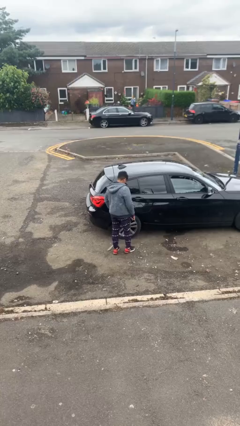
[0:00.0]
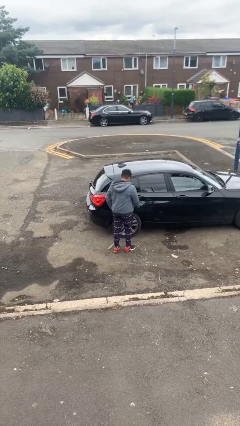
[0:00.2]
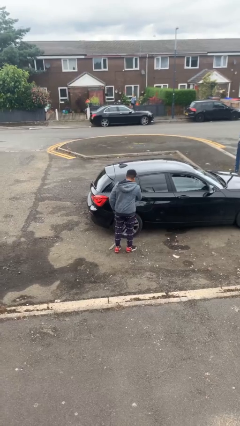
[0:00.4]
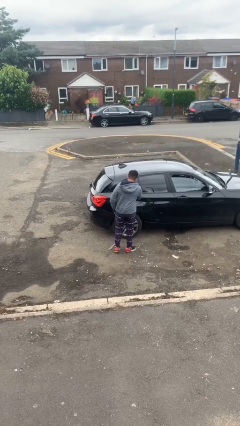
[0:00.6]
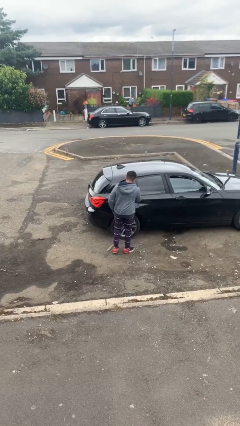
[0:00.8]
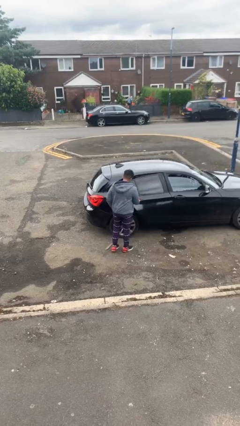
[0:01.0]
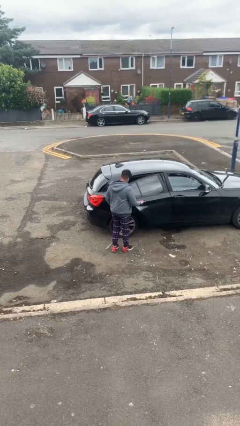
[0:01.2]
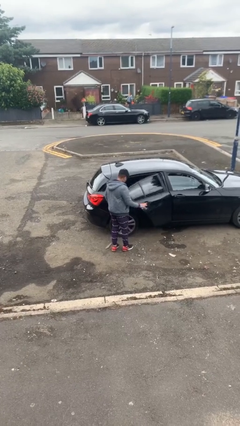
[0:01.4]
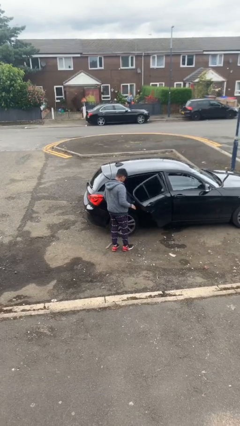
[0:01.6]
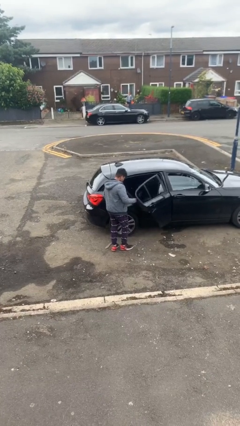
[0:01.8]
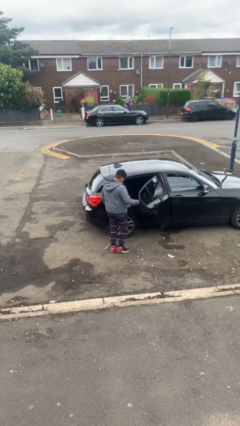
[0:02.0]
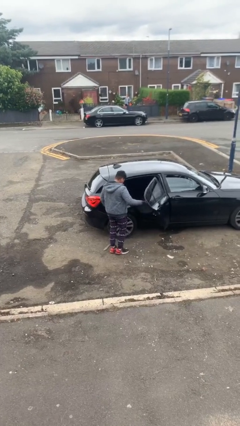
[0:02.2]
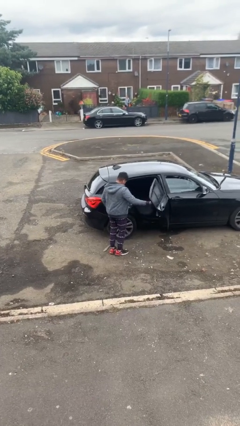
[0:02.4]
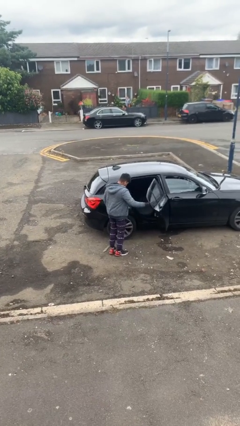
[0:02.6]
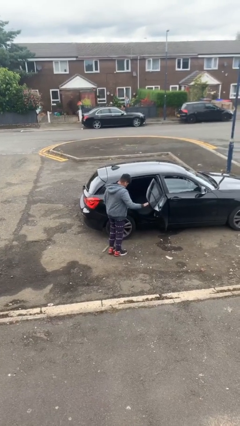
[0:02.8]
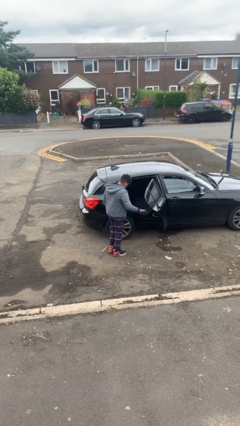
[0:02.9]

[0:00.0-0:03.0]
person opens car door

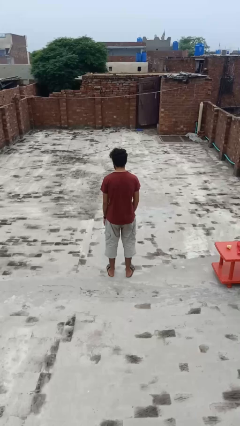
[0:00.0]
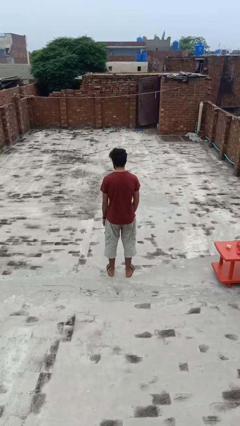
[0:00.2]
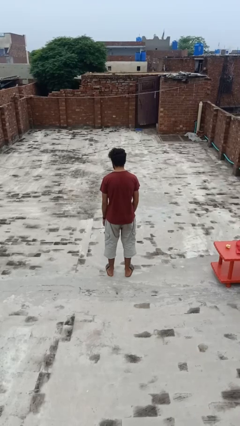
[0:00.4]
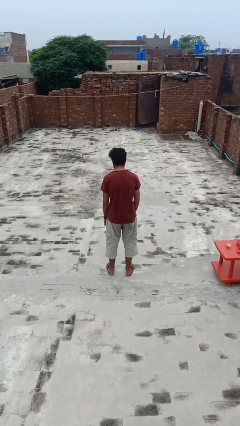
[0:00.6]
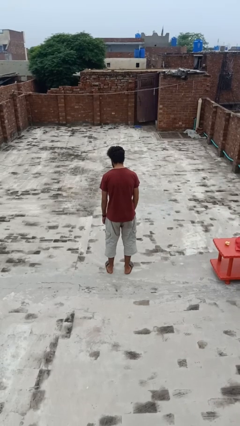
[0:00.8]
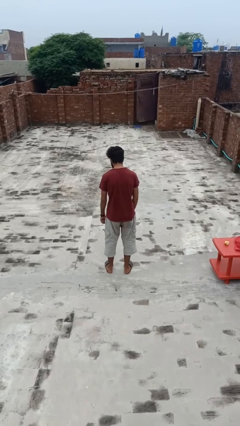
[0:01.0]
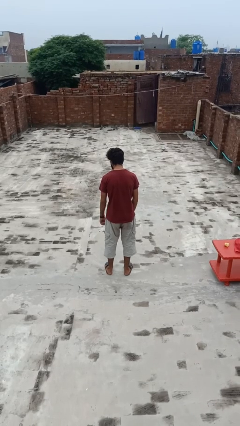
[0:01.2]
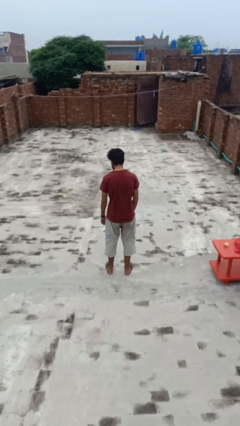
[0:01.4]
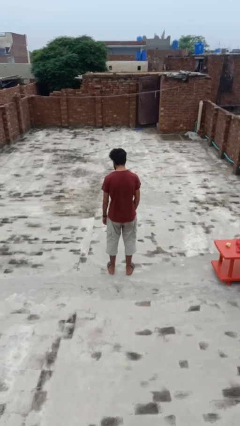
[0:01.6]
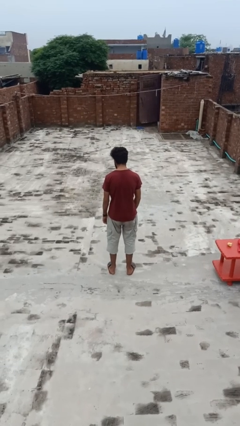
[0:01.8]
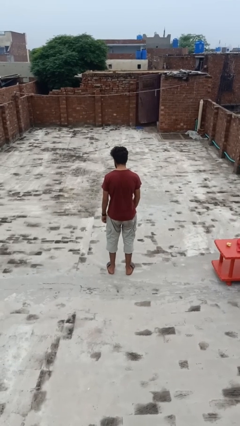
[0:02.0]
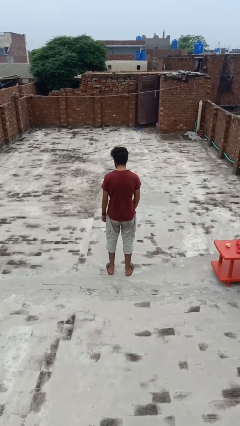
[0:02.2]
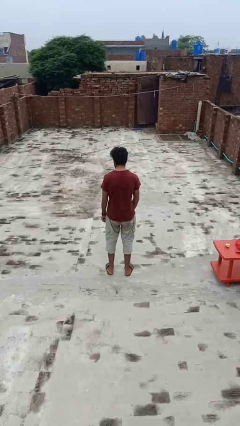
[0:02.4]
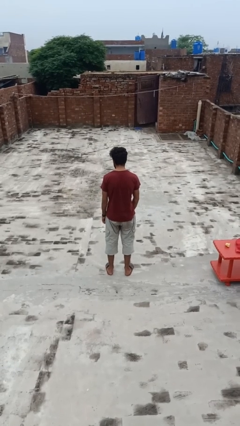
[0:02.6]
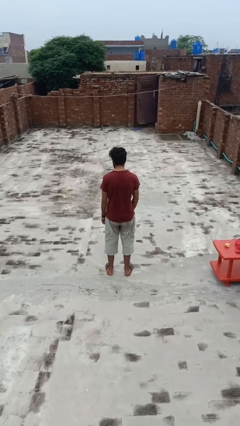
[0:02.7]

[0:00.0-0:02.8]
person gestures watch closely

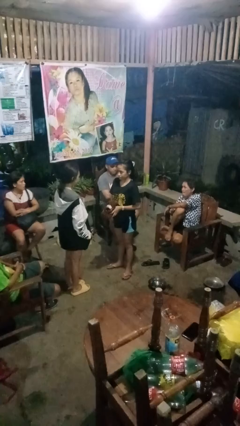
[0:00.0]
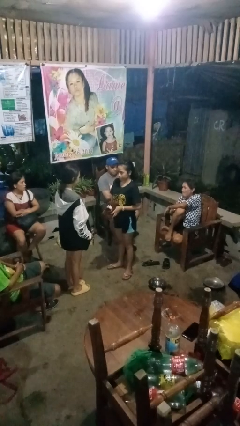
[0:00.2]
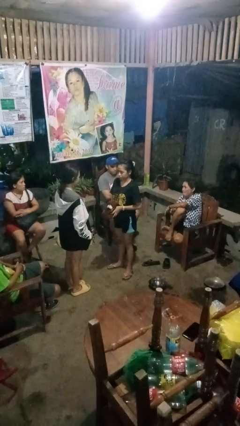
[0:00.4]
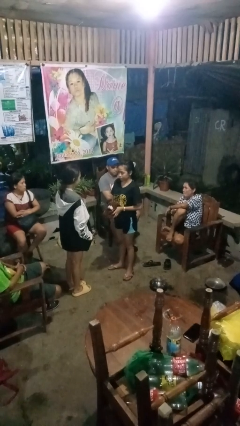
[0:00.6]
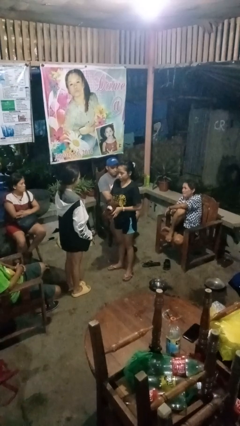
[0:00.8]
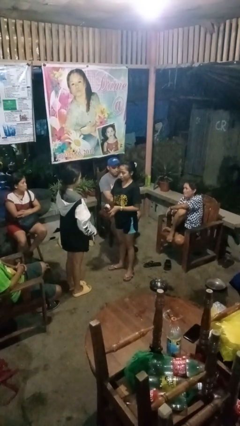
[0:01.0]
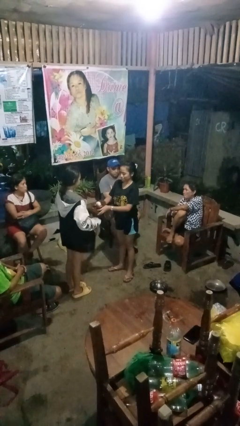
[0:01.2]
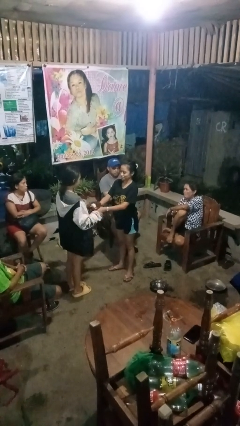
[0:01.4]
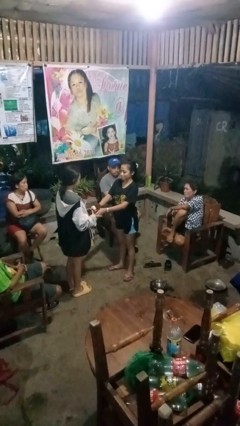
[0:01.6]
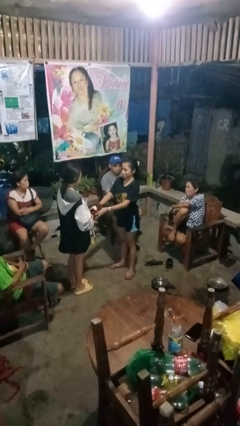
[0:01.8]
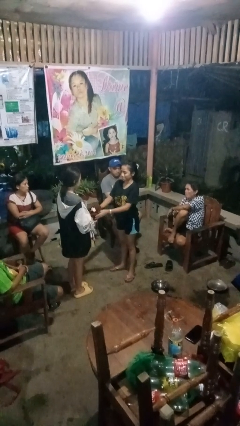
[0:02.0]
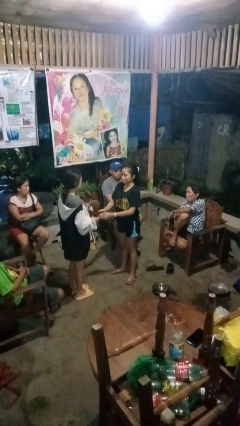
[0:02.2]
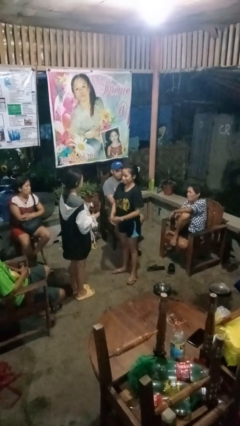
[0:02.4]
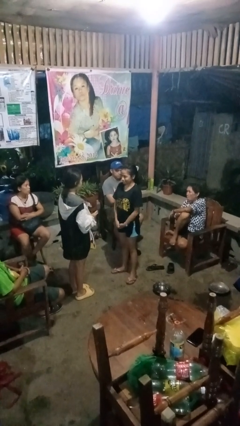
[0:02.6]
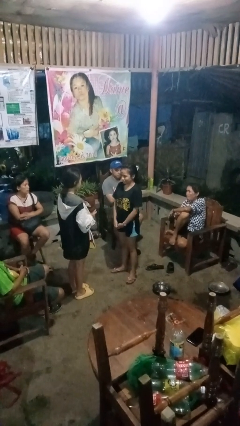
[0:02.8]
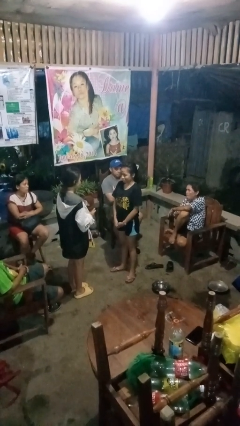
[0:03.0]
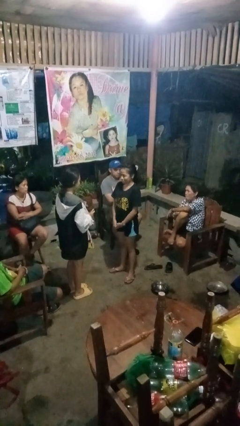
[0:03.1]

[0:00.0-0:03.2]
person transfers object to person

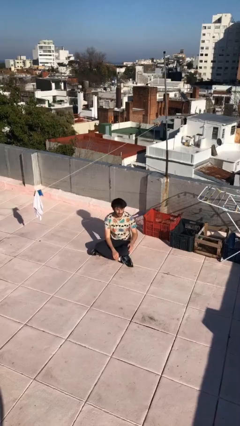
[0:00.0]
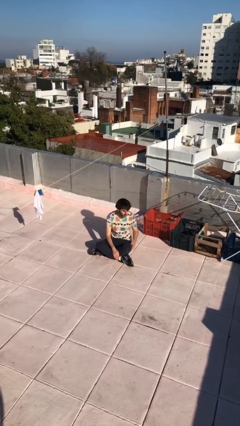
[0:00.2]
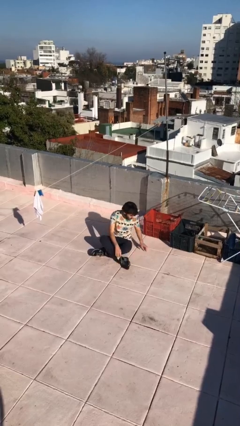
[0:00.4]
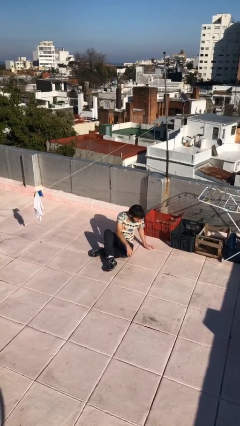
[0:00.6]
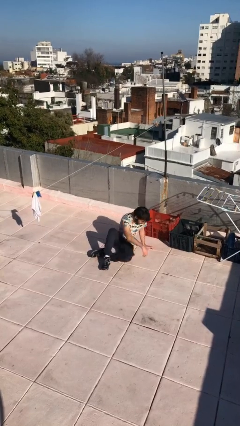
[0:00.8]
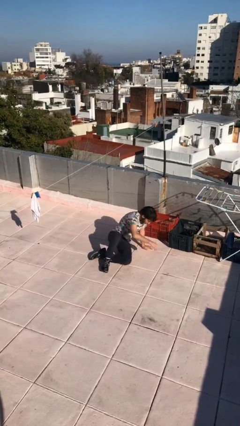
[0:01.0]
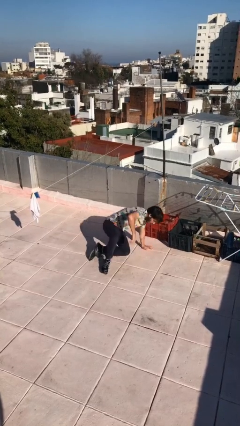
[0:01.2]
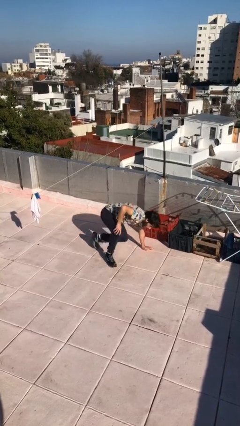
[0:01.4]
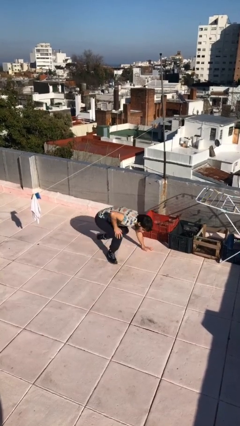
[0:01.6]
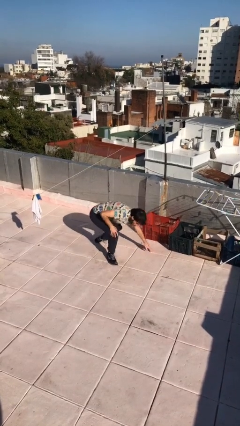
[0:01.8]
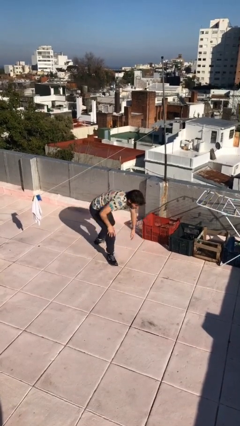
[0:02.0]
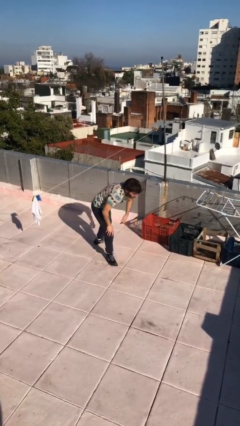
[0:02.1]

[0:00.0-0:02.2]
person stands up from floor

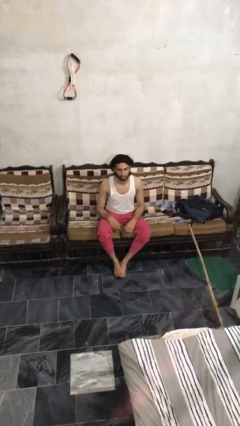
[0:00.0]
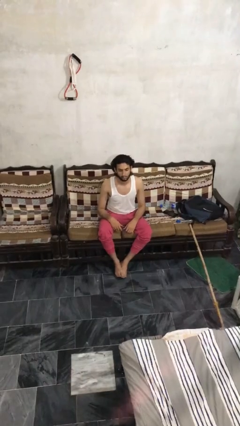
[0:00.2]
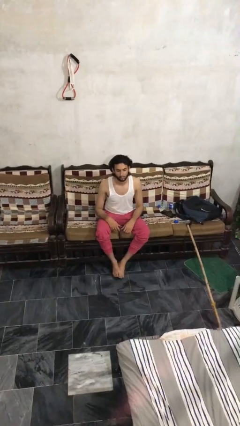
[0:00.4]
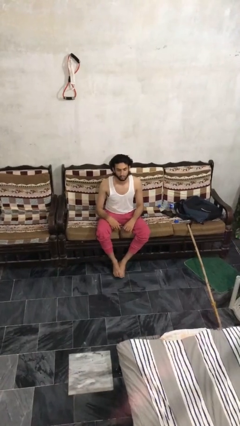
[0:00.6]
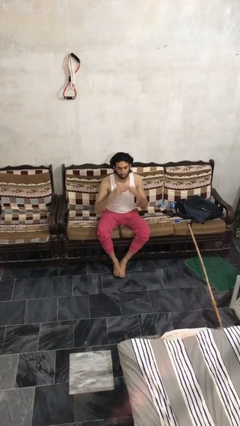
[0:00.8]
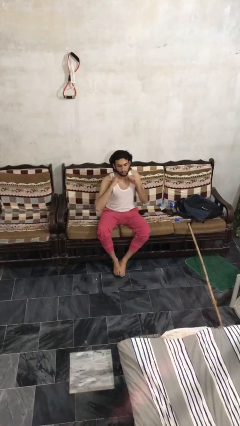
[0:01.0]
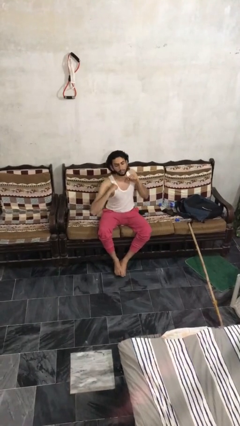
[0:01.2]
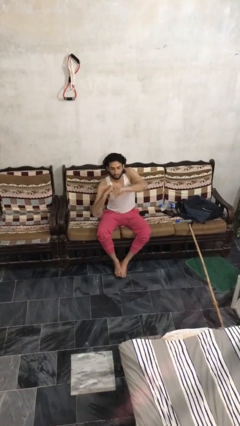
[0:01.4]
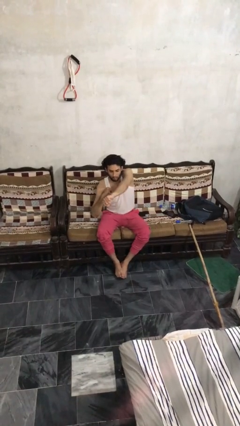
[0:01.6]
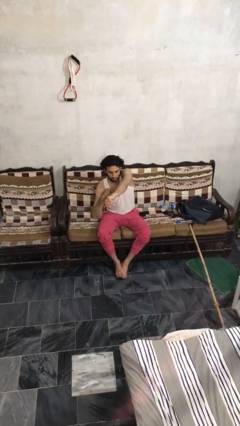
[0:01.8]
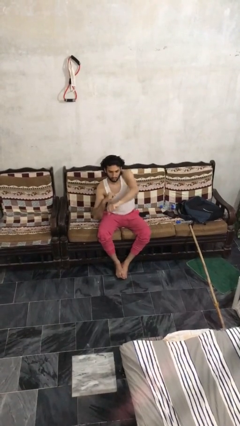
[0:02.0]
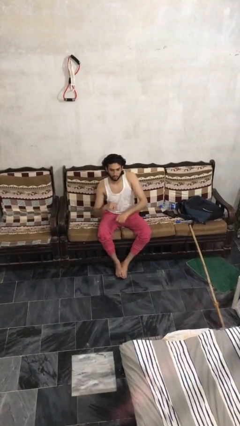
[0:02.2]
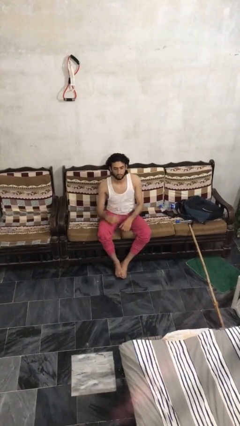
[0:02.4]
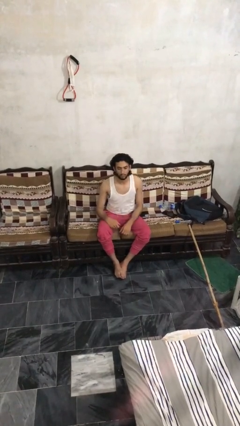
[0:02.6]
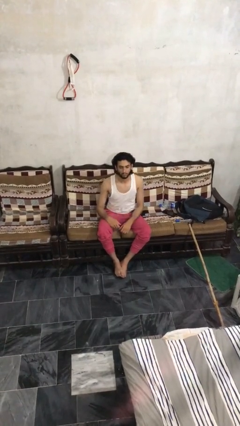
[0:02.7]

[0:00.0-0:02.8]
person punches

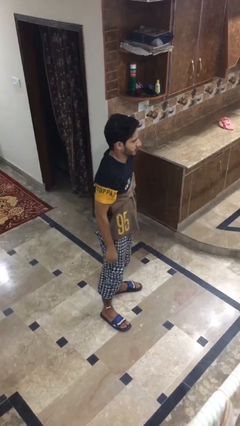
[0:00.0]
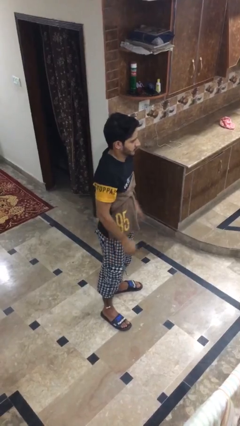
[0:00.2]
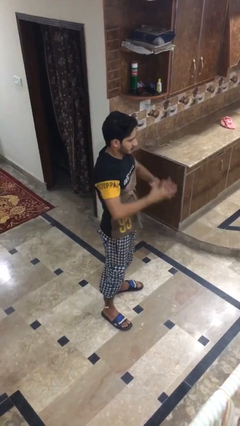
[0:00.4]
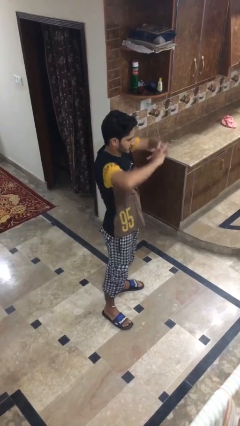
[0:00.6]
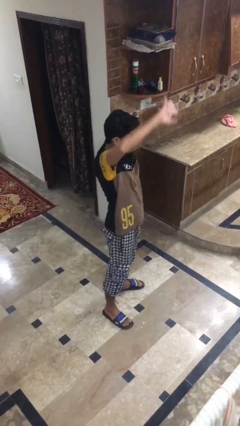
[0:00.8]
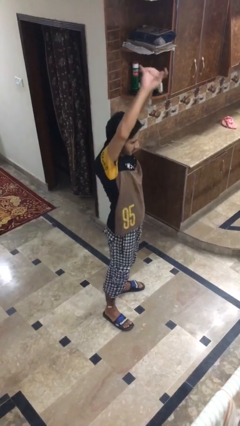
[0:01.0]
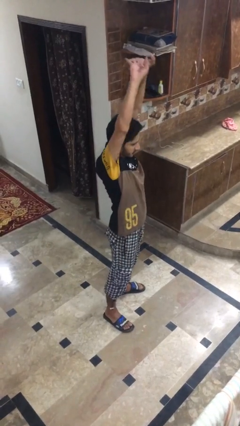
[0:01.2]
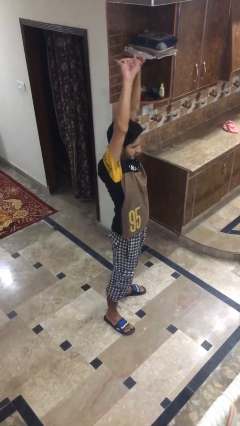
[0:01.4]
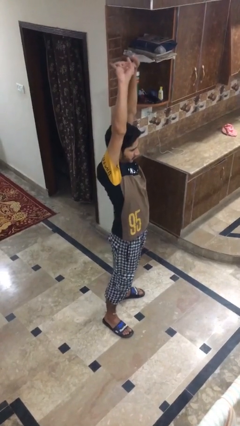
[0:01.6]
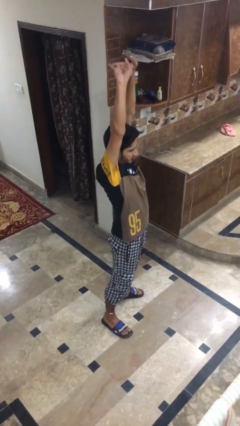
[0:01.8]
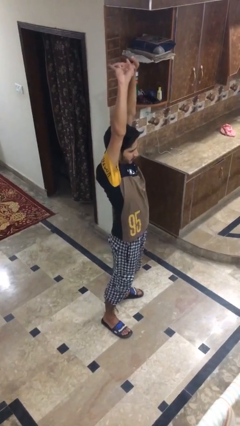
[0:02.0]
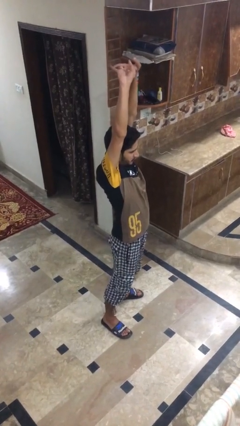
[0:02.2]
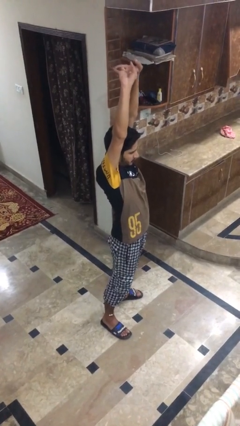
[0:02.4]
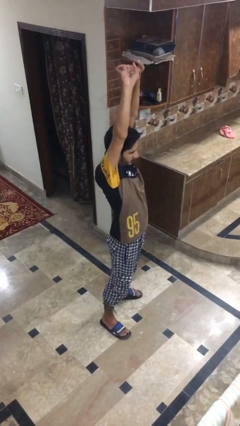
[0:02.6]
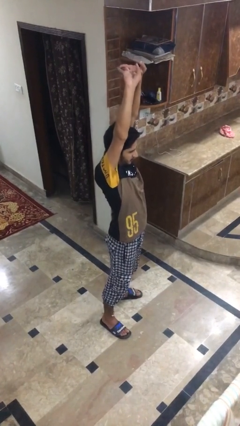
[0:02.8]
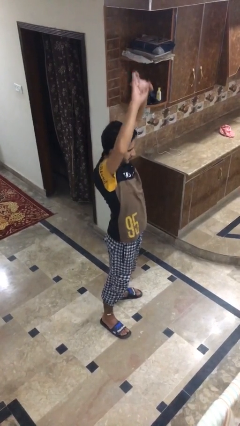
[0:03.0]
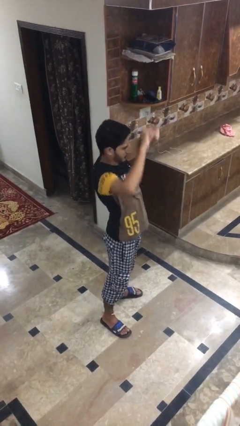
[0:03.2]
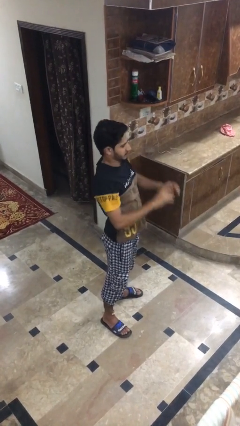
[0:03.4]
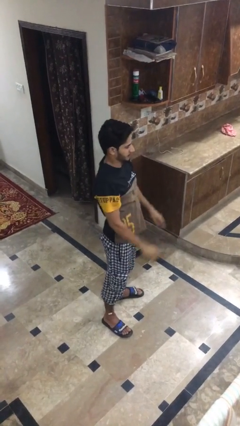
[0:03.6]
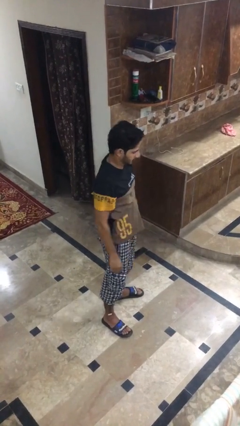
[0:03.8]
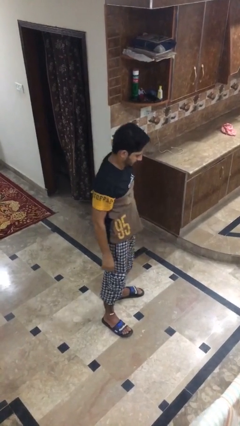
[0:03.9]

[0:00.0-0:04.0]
person stretches arms over head
